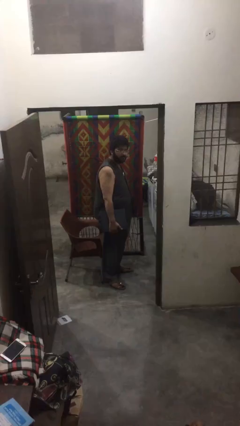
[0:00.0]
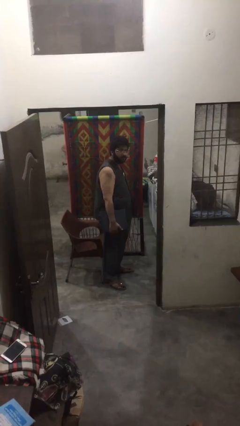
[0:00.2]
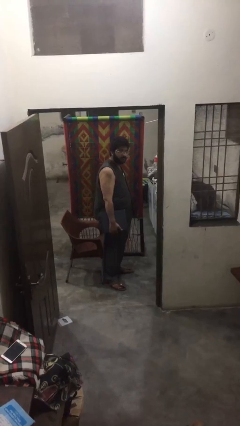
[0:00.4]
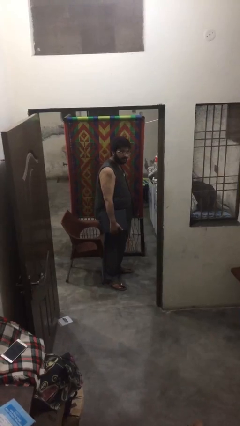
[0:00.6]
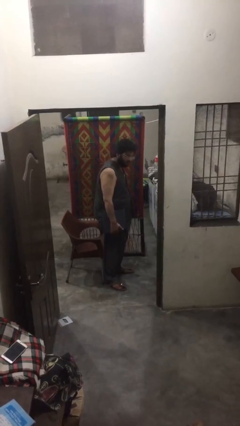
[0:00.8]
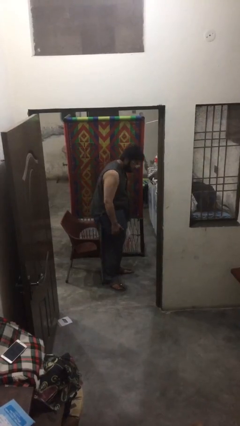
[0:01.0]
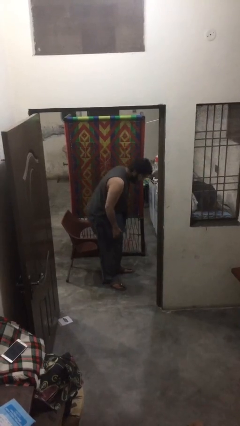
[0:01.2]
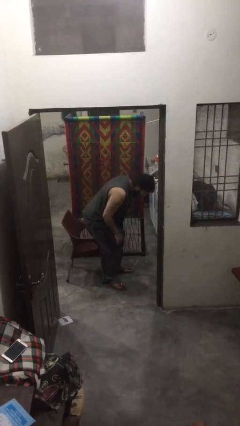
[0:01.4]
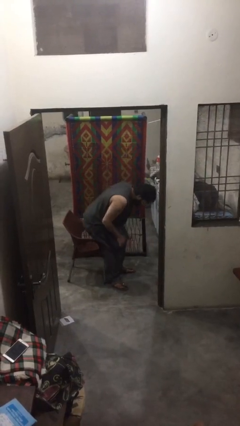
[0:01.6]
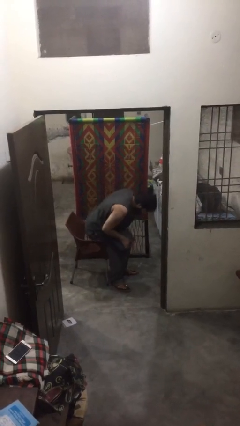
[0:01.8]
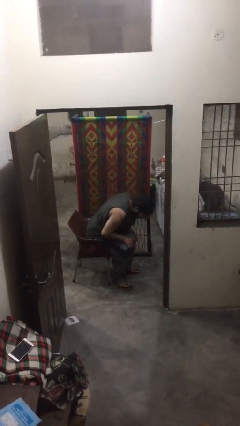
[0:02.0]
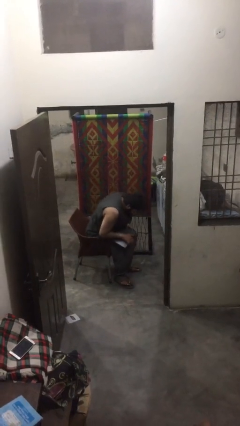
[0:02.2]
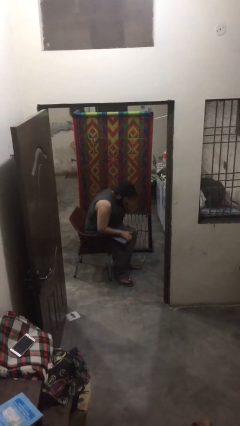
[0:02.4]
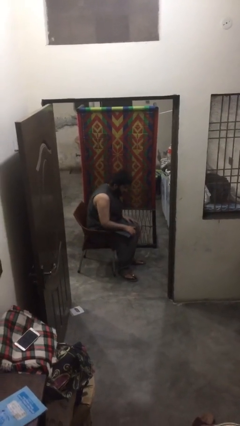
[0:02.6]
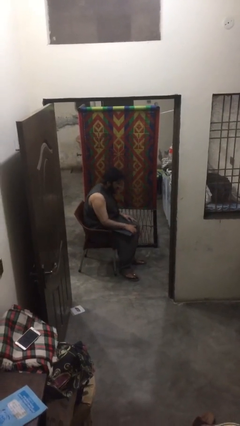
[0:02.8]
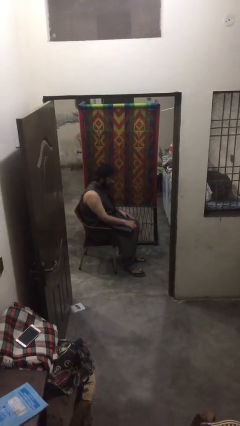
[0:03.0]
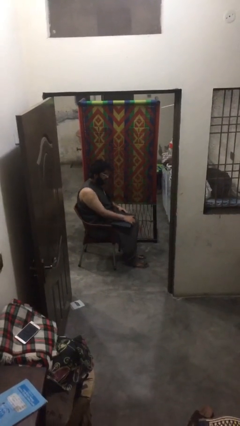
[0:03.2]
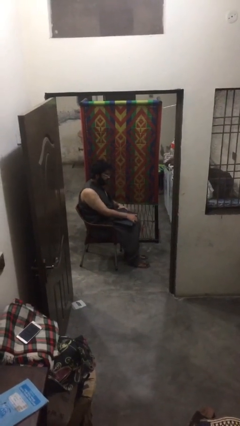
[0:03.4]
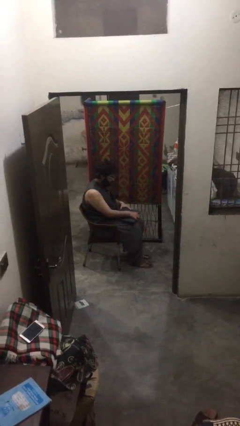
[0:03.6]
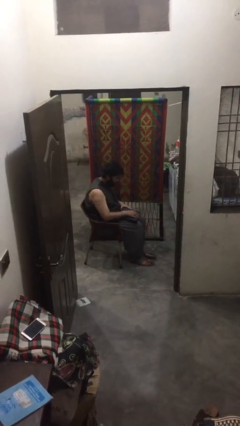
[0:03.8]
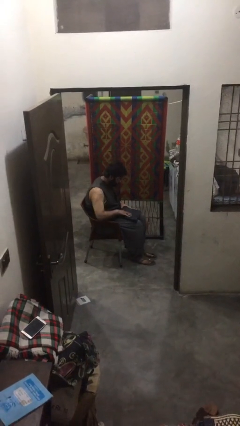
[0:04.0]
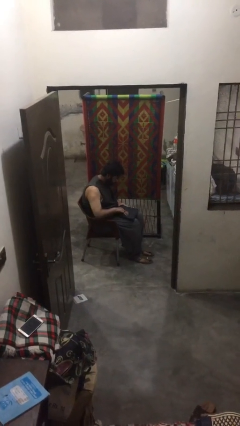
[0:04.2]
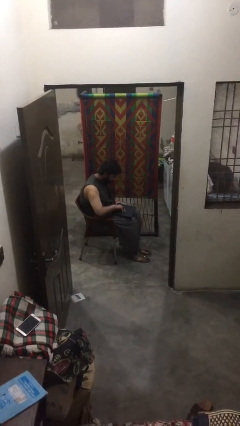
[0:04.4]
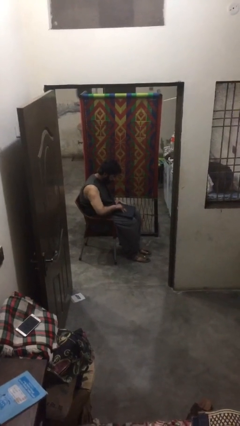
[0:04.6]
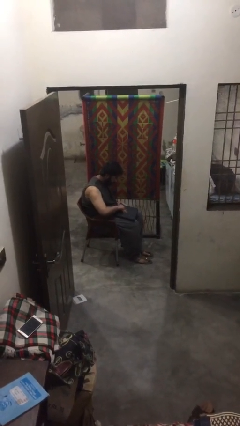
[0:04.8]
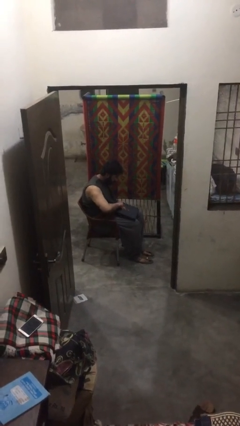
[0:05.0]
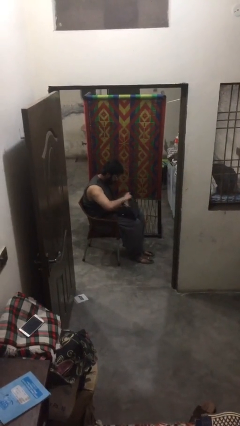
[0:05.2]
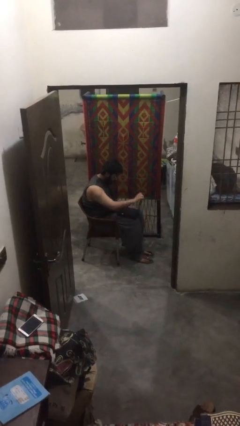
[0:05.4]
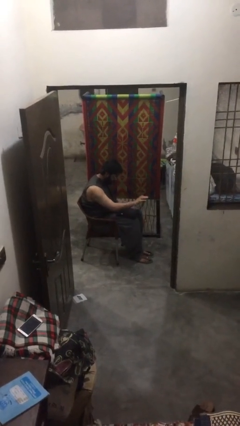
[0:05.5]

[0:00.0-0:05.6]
person sits down

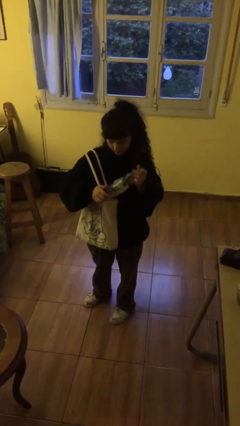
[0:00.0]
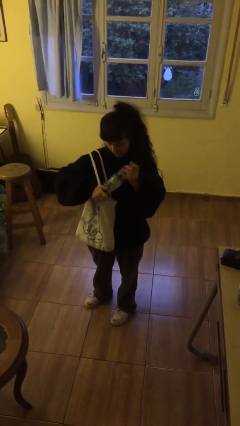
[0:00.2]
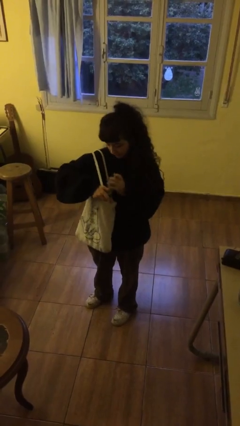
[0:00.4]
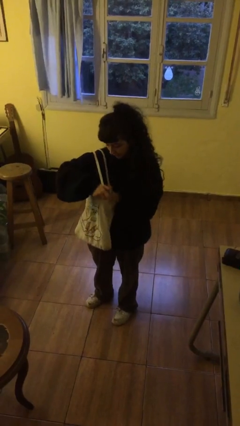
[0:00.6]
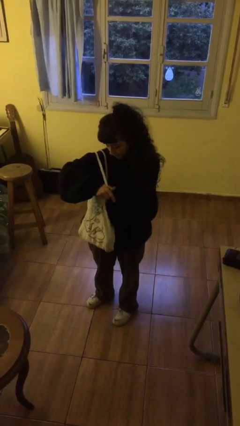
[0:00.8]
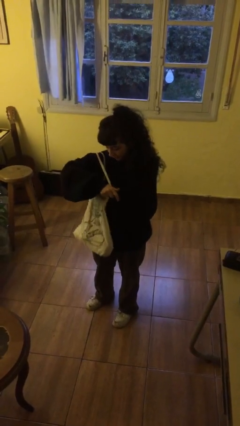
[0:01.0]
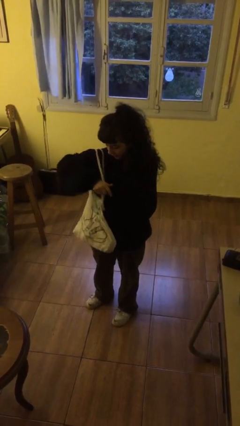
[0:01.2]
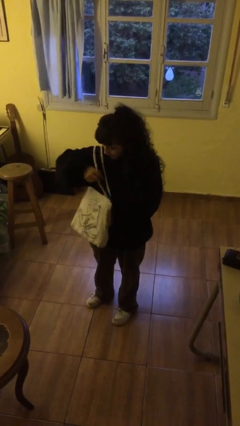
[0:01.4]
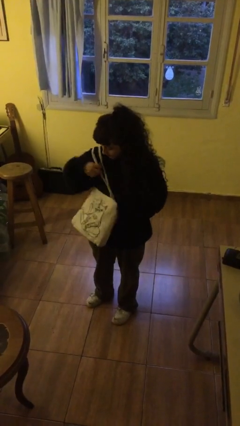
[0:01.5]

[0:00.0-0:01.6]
person puts object into purse

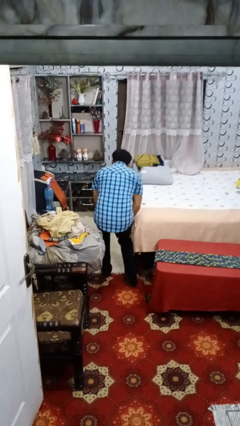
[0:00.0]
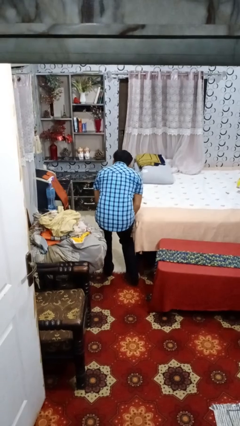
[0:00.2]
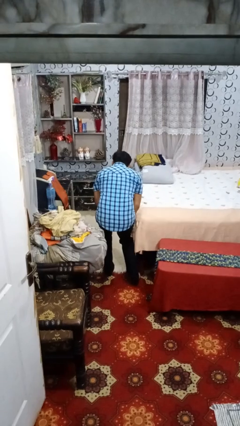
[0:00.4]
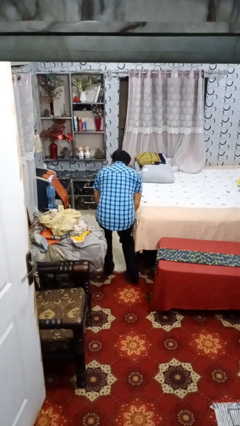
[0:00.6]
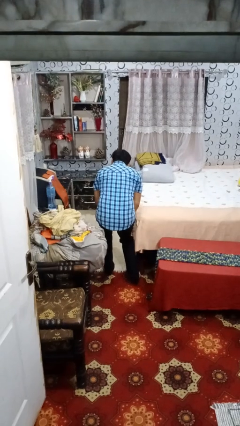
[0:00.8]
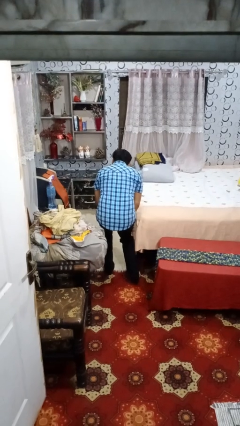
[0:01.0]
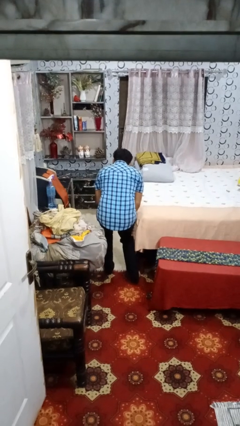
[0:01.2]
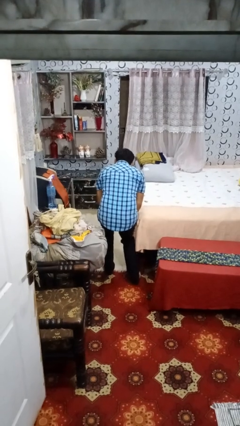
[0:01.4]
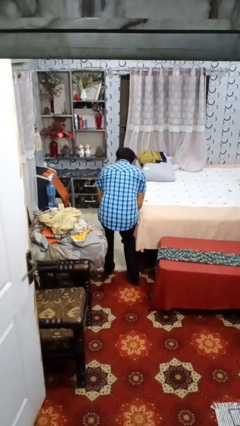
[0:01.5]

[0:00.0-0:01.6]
person stubs toe

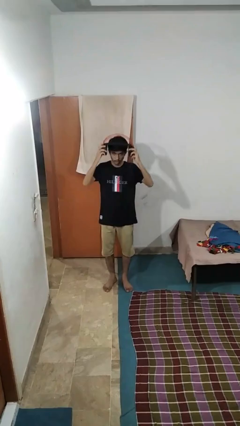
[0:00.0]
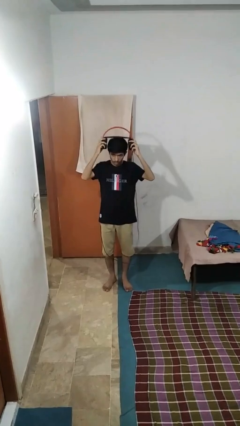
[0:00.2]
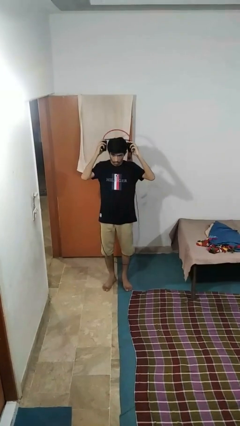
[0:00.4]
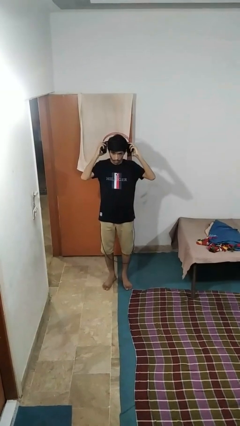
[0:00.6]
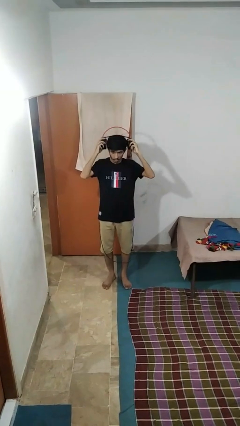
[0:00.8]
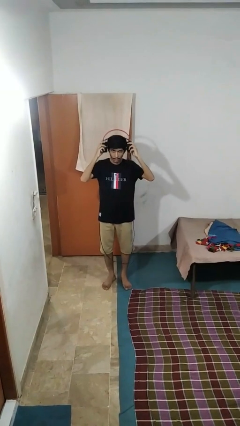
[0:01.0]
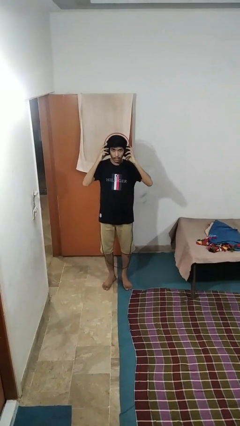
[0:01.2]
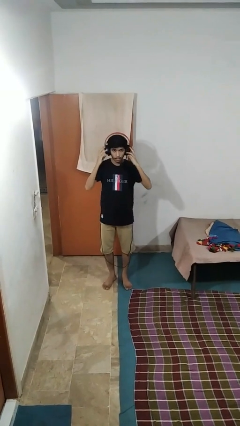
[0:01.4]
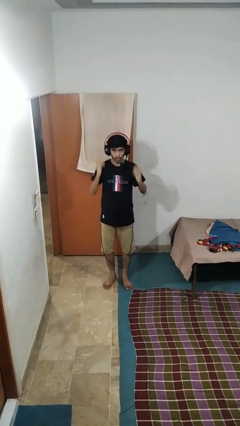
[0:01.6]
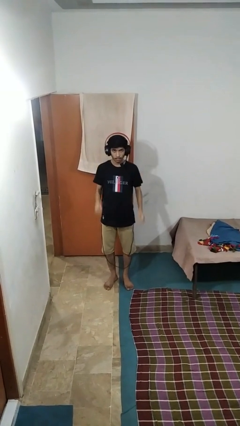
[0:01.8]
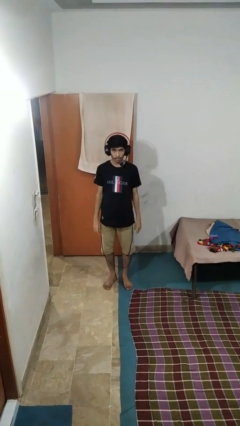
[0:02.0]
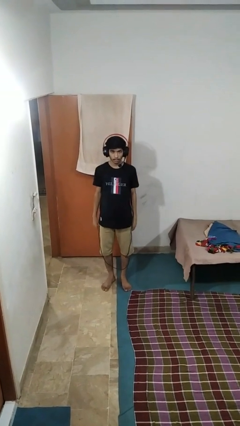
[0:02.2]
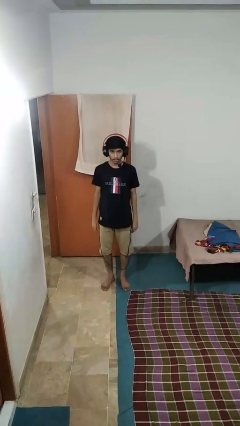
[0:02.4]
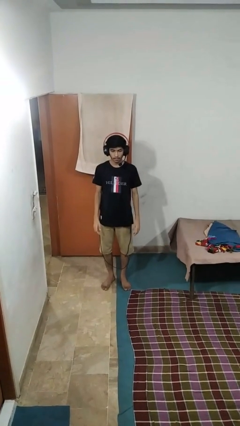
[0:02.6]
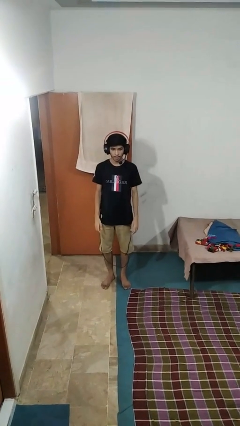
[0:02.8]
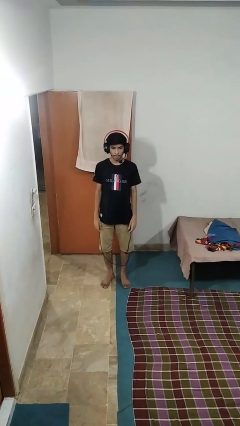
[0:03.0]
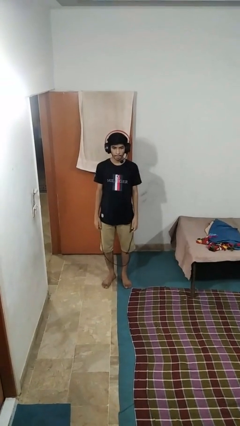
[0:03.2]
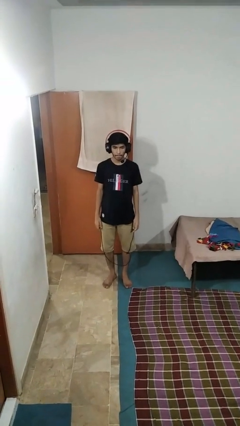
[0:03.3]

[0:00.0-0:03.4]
person puts on headphones

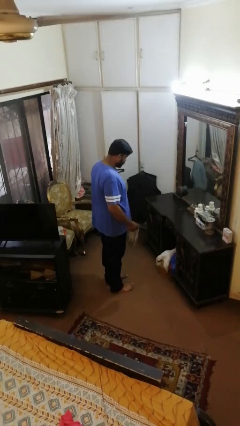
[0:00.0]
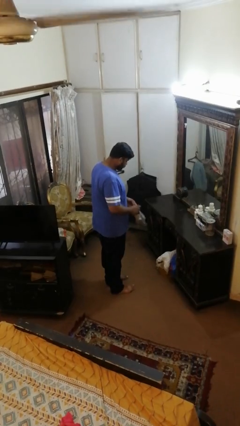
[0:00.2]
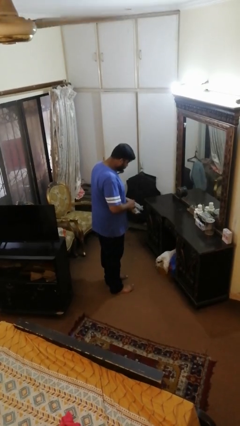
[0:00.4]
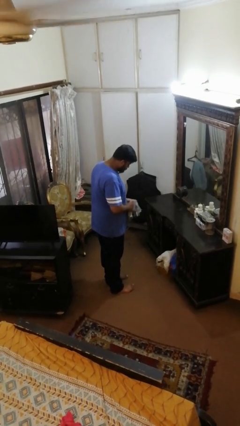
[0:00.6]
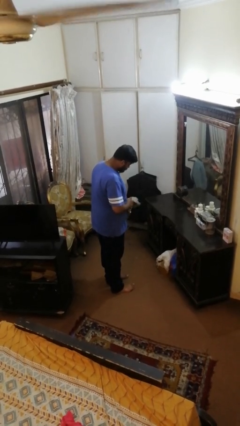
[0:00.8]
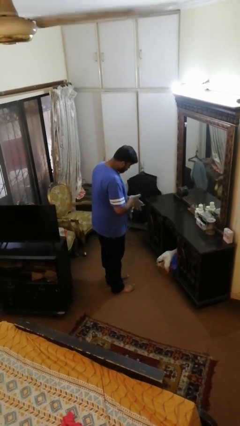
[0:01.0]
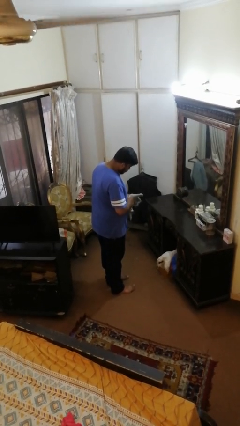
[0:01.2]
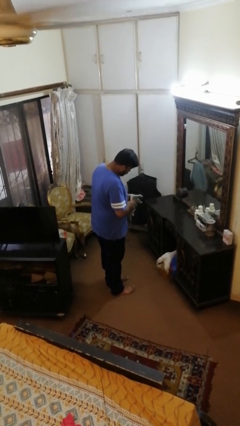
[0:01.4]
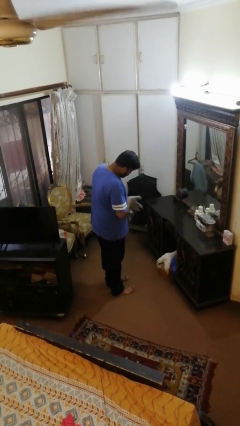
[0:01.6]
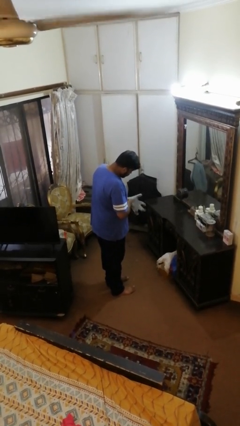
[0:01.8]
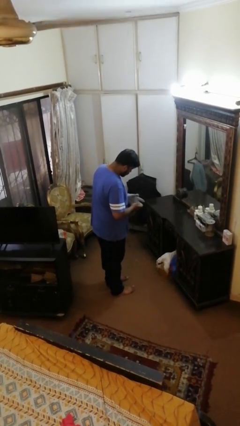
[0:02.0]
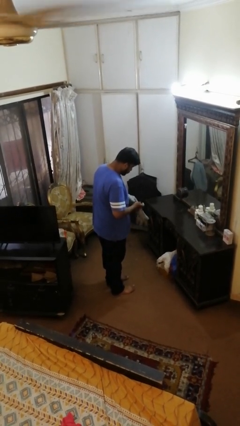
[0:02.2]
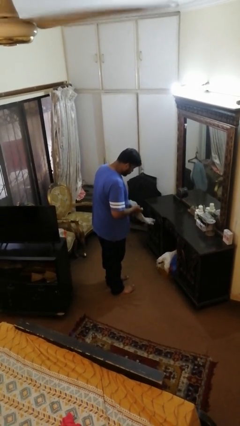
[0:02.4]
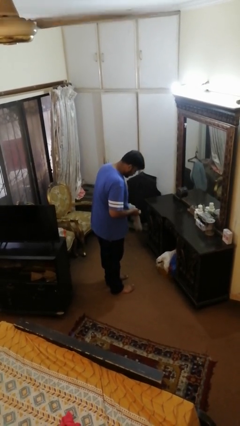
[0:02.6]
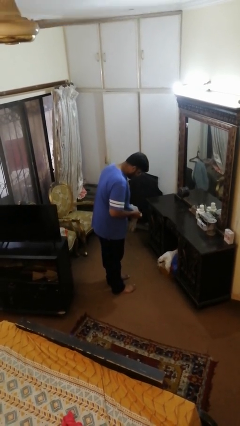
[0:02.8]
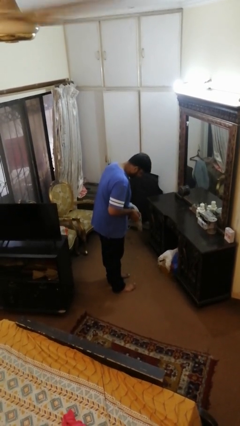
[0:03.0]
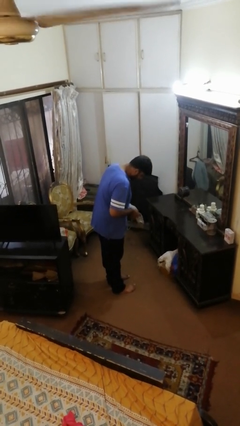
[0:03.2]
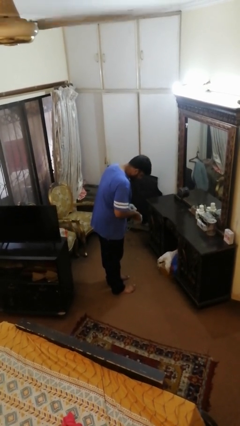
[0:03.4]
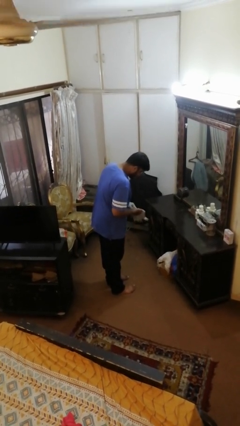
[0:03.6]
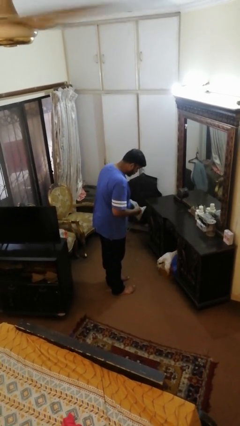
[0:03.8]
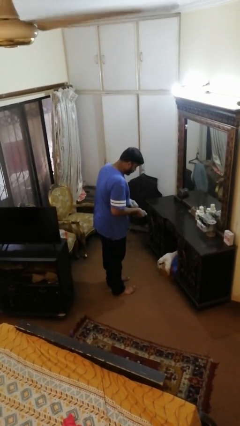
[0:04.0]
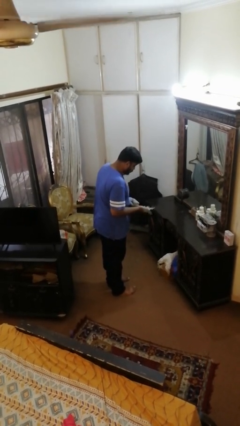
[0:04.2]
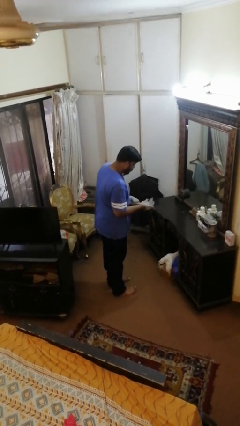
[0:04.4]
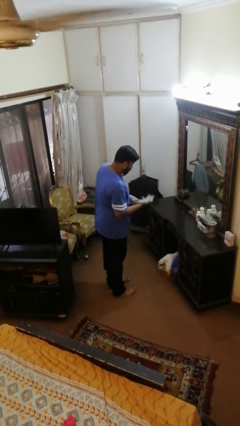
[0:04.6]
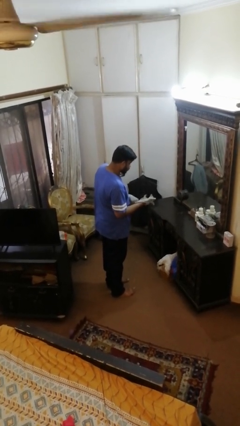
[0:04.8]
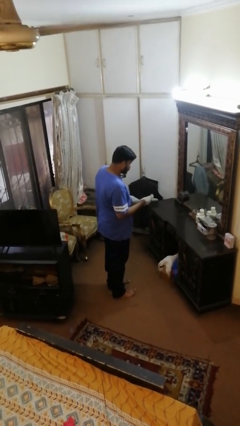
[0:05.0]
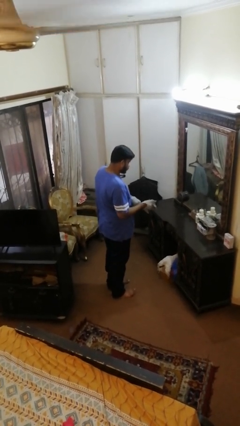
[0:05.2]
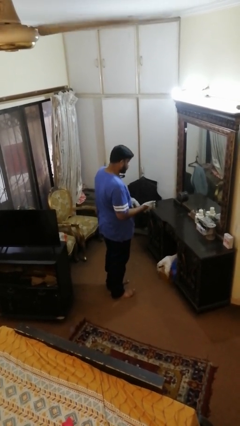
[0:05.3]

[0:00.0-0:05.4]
person puts on gloves
